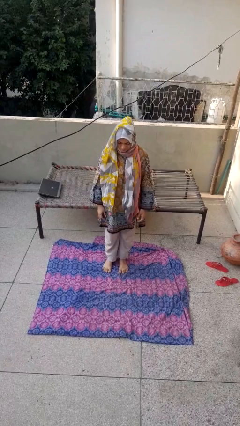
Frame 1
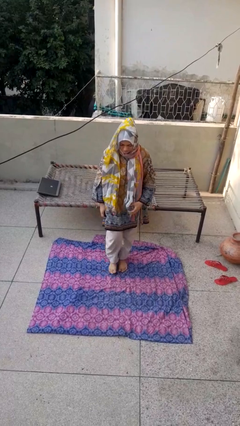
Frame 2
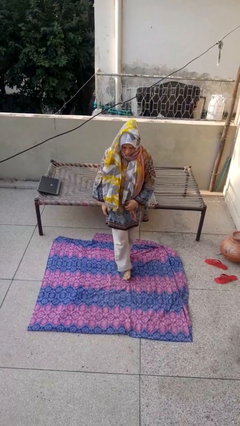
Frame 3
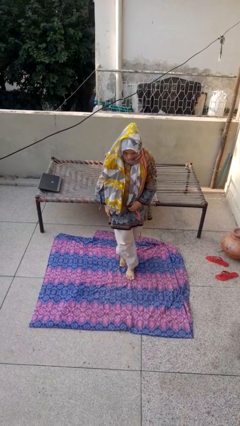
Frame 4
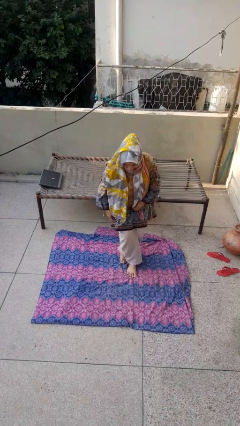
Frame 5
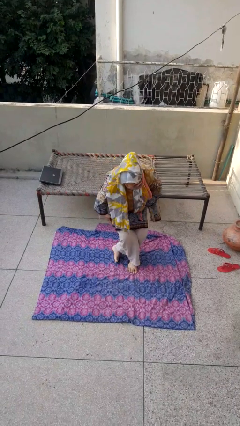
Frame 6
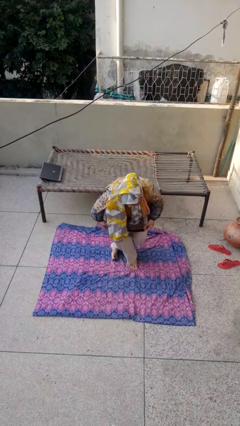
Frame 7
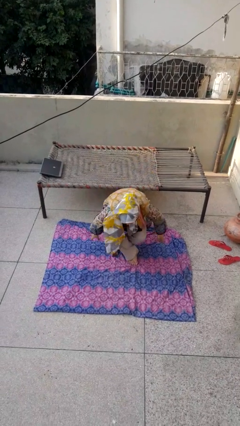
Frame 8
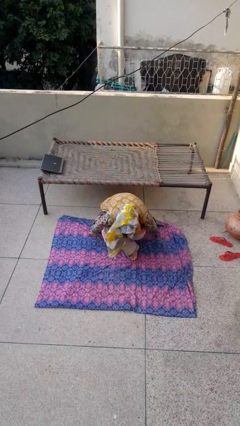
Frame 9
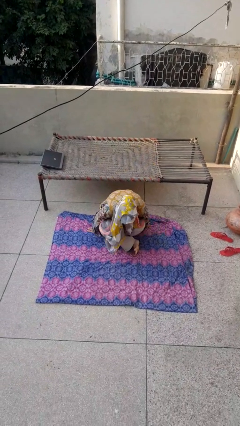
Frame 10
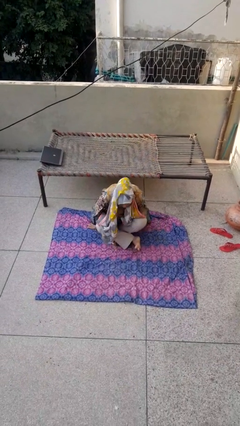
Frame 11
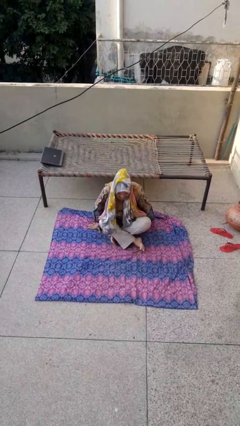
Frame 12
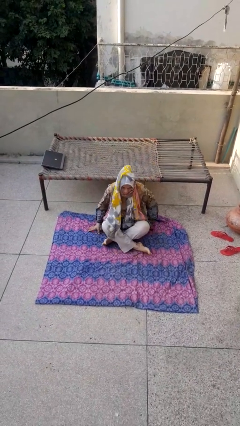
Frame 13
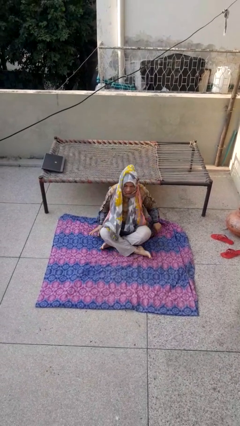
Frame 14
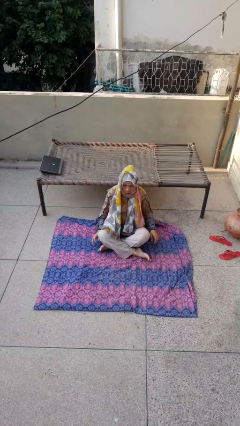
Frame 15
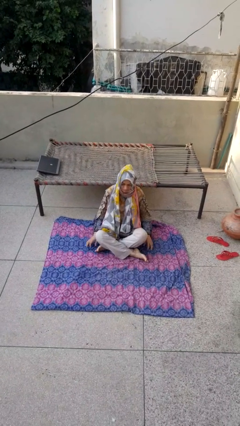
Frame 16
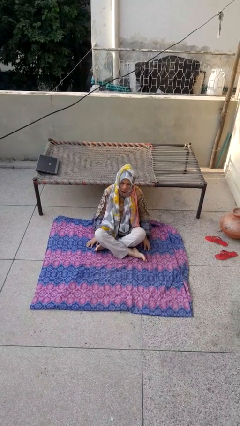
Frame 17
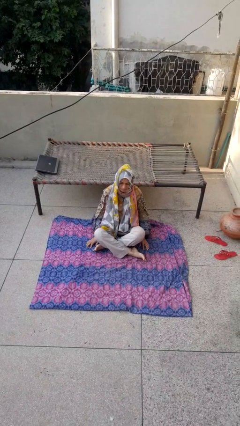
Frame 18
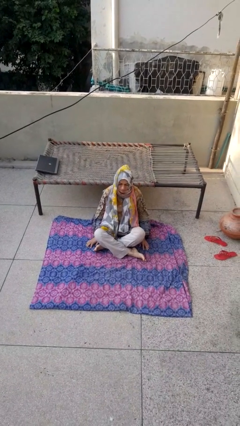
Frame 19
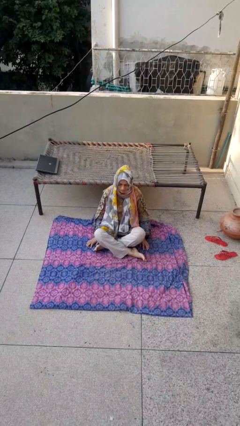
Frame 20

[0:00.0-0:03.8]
person sits crisscross

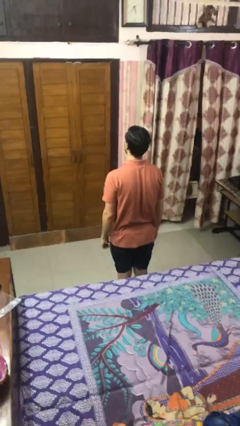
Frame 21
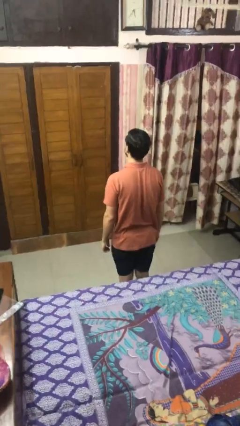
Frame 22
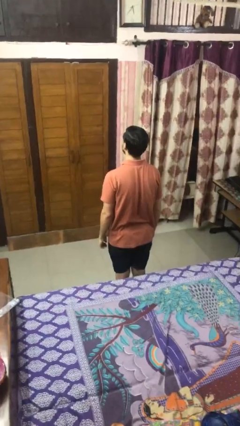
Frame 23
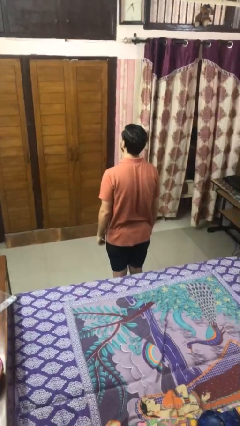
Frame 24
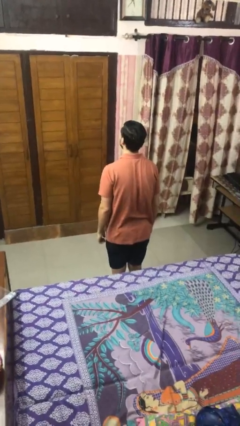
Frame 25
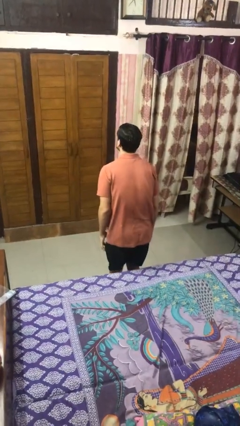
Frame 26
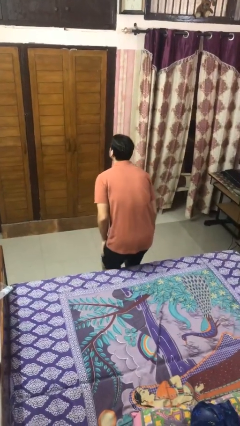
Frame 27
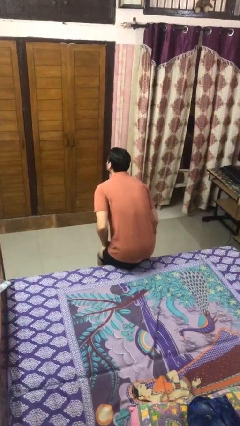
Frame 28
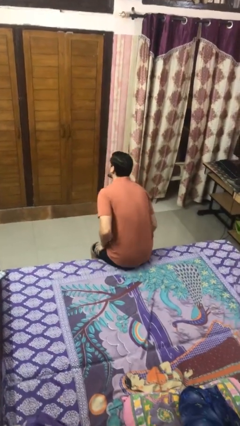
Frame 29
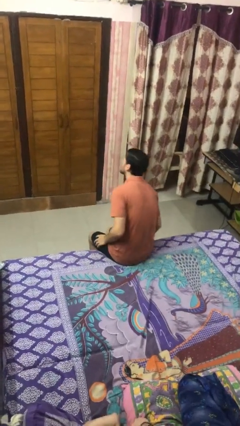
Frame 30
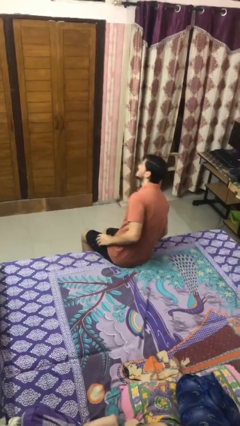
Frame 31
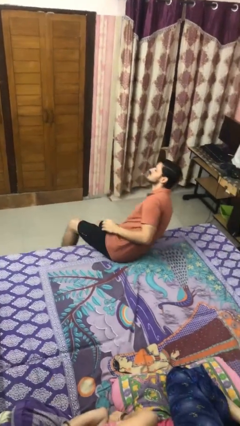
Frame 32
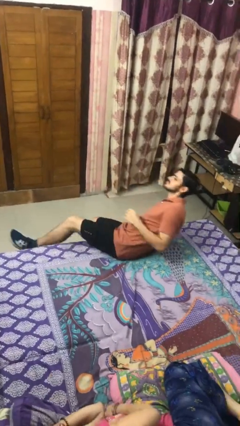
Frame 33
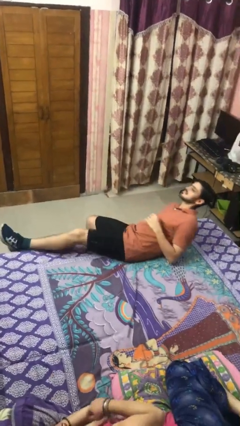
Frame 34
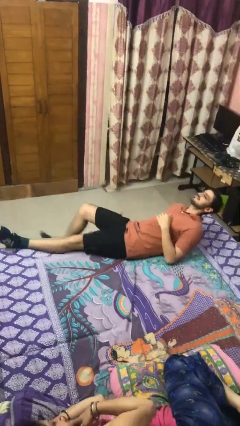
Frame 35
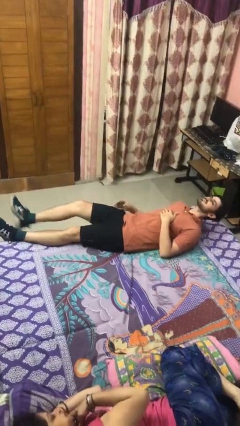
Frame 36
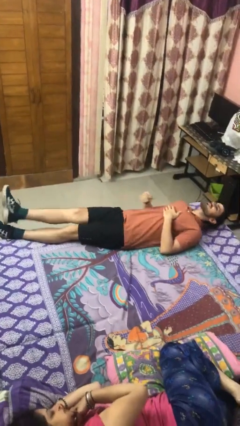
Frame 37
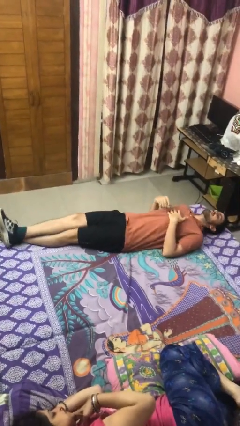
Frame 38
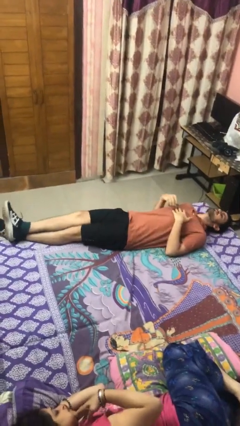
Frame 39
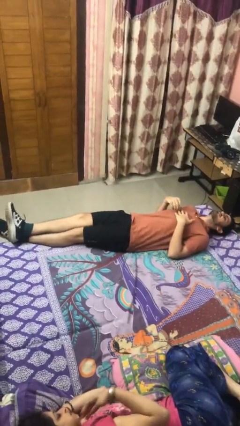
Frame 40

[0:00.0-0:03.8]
person lies down on bed

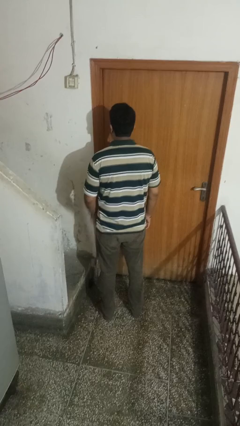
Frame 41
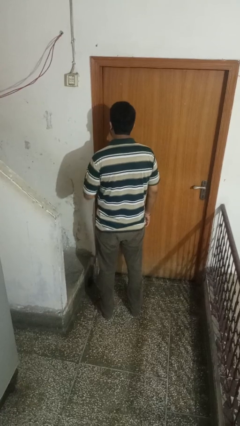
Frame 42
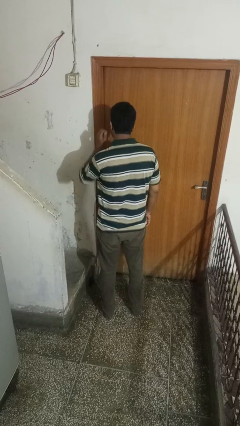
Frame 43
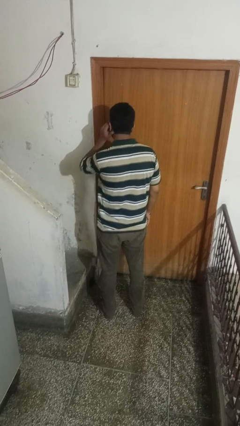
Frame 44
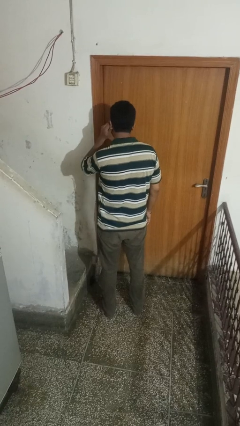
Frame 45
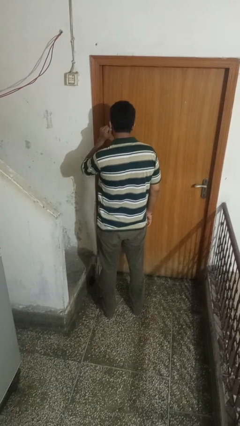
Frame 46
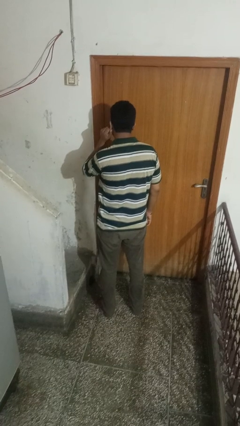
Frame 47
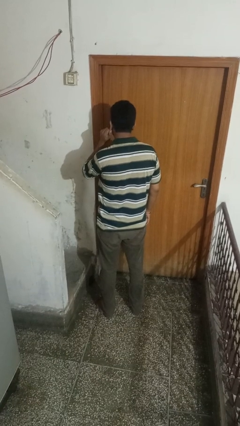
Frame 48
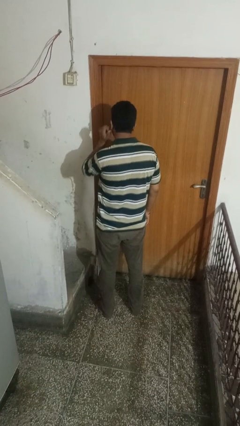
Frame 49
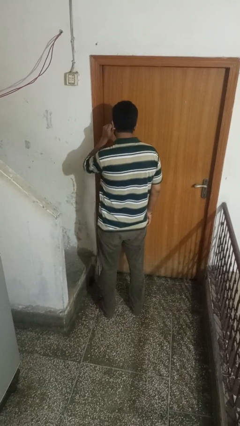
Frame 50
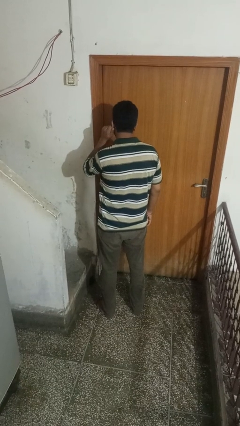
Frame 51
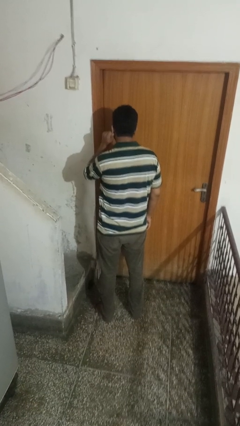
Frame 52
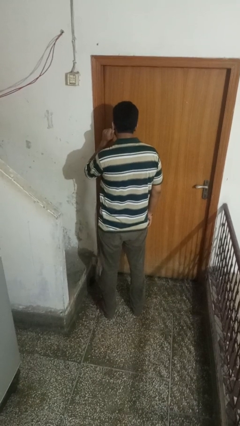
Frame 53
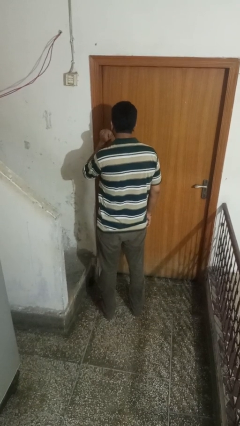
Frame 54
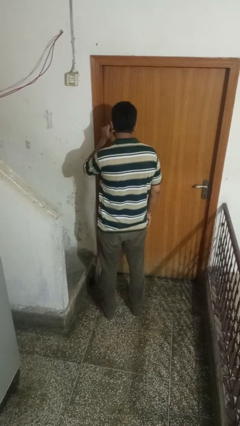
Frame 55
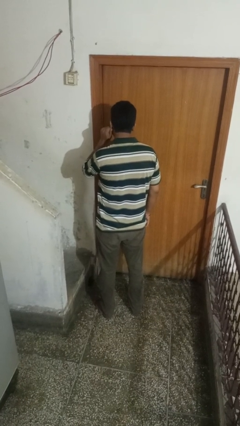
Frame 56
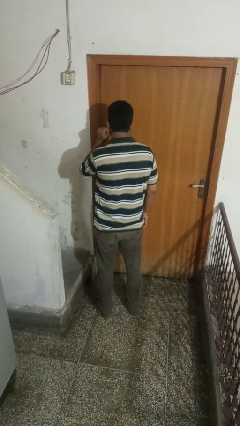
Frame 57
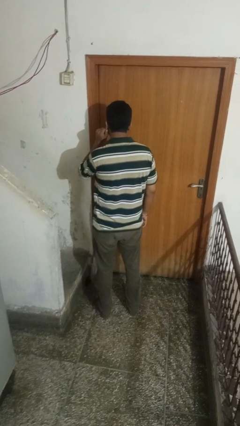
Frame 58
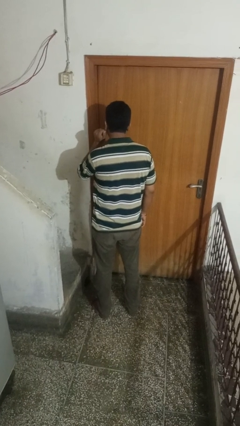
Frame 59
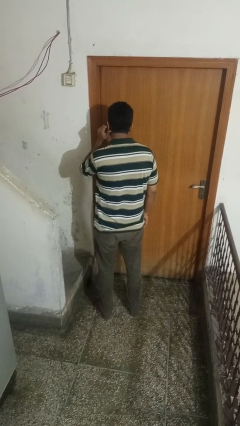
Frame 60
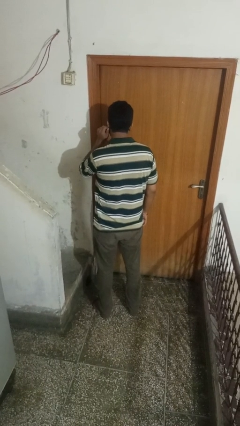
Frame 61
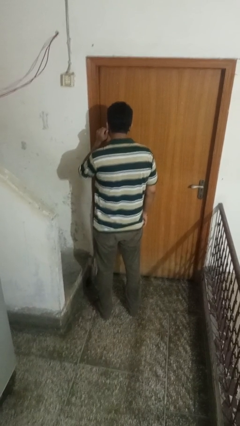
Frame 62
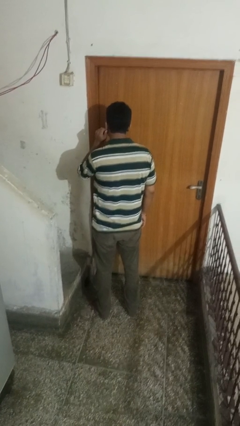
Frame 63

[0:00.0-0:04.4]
person touches earlobe

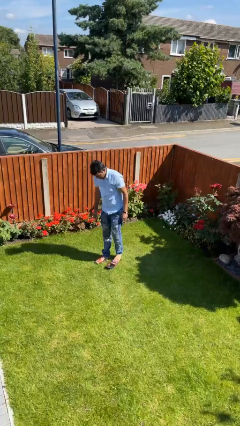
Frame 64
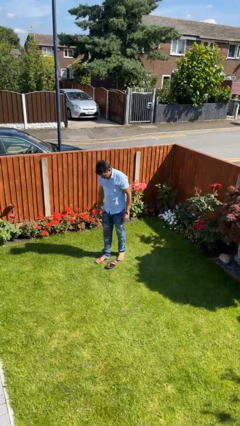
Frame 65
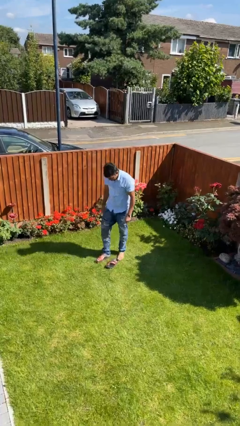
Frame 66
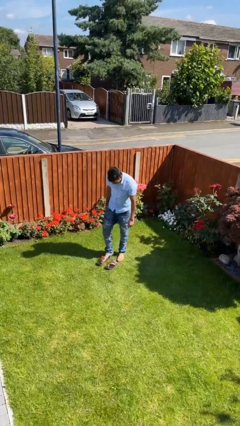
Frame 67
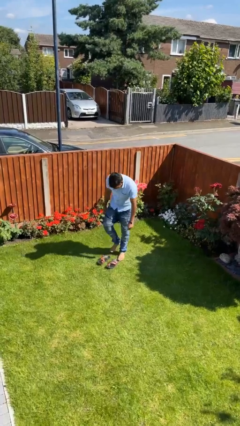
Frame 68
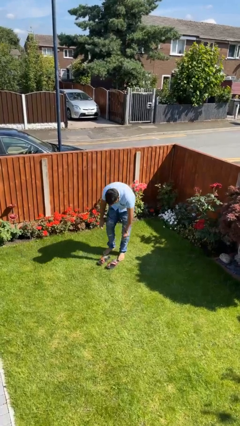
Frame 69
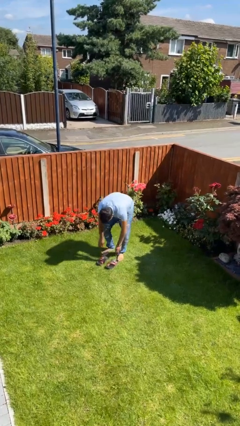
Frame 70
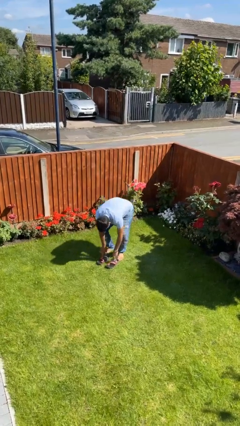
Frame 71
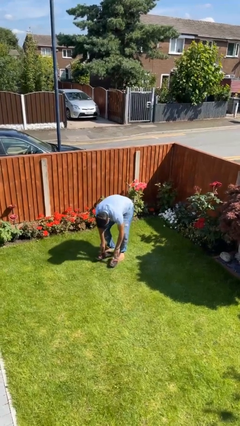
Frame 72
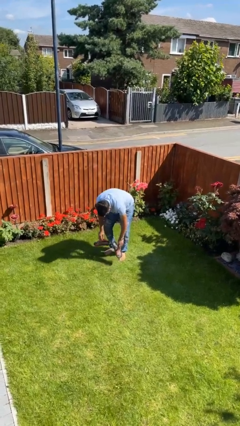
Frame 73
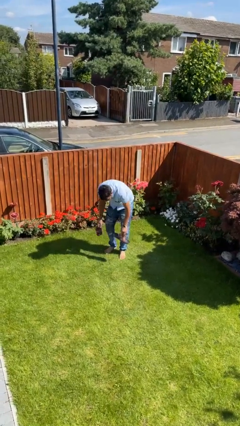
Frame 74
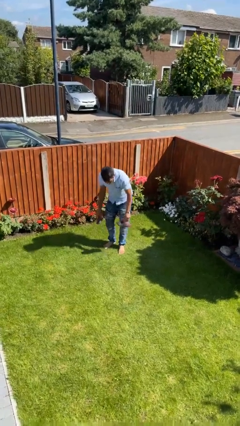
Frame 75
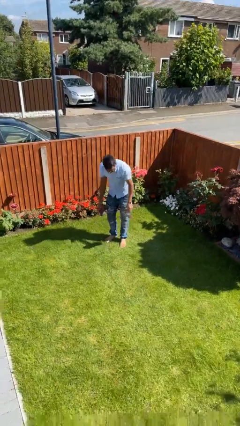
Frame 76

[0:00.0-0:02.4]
person takes off shoes

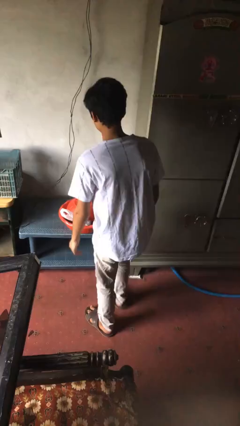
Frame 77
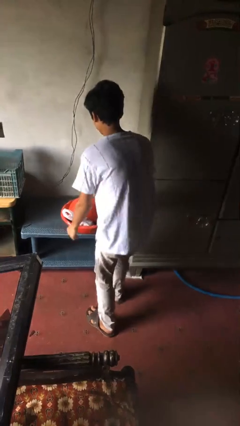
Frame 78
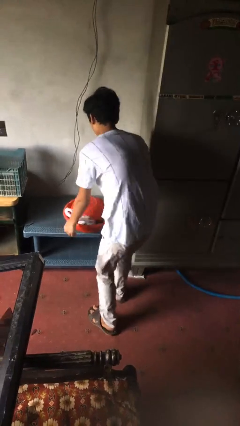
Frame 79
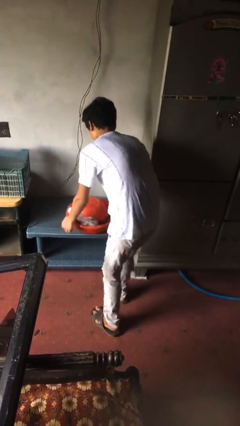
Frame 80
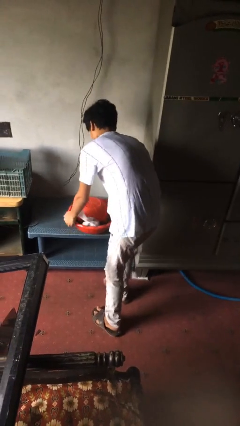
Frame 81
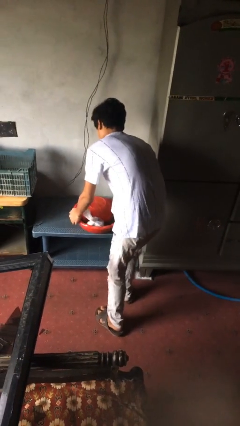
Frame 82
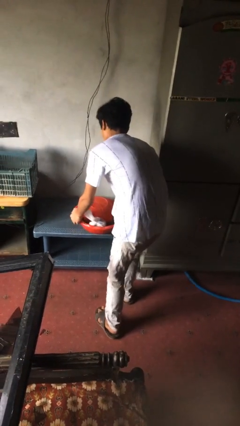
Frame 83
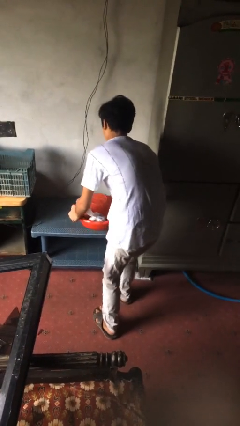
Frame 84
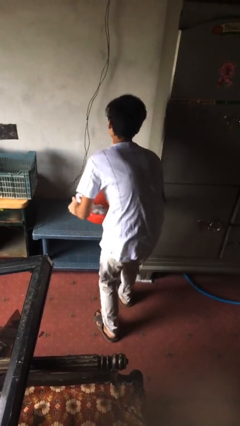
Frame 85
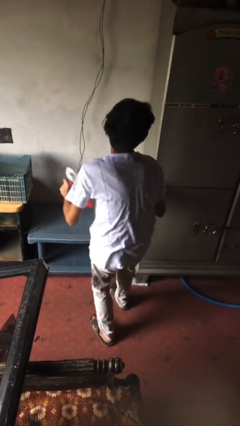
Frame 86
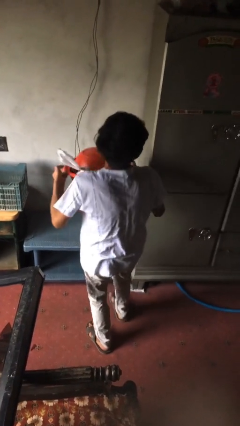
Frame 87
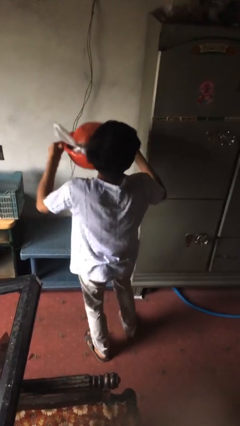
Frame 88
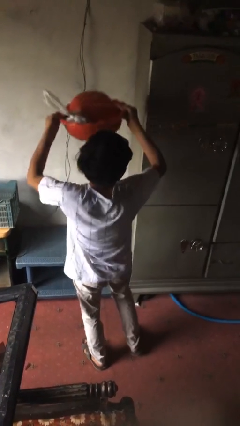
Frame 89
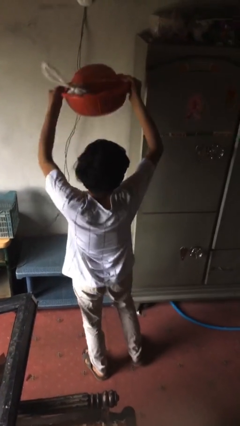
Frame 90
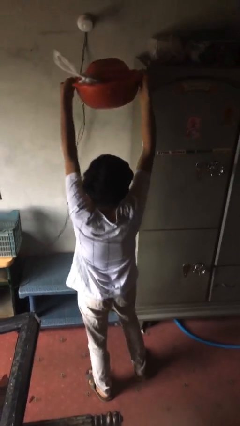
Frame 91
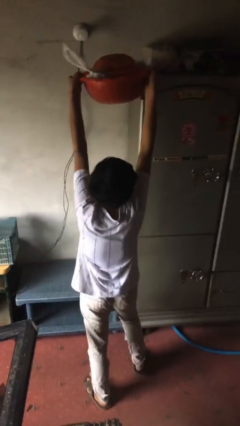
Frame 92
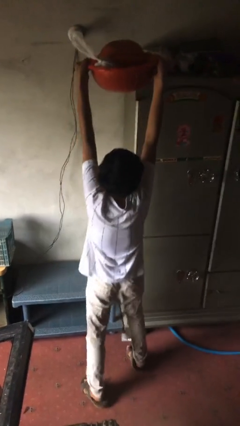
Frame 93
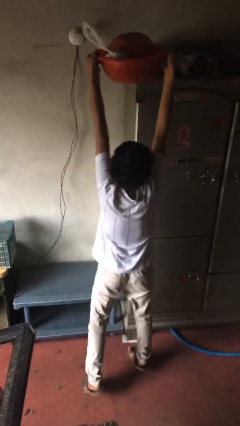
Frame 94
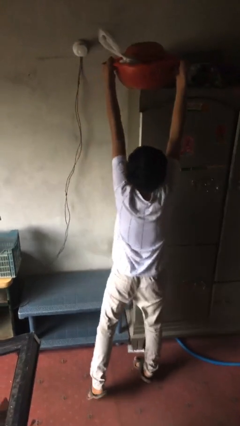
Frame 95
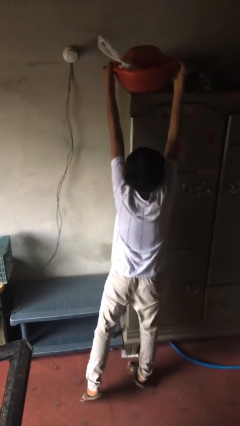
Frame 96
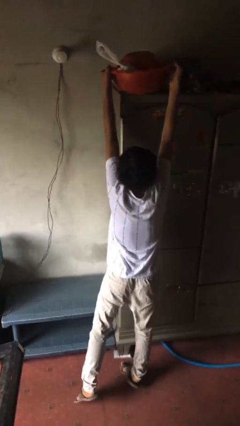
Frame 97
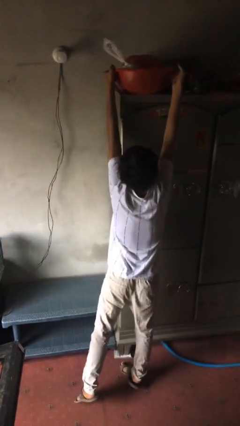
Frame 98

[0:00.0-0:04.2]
person picks up object from table
